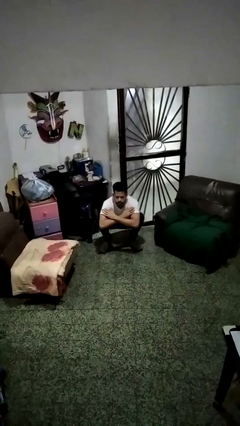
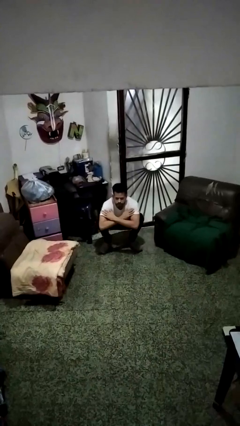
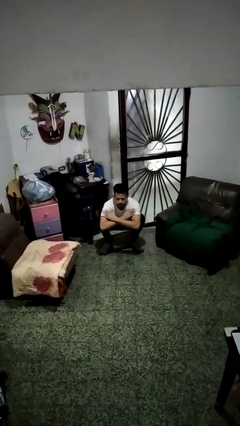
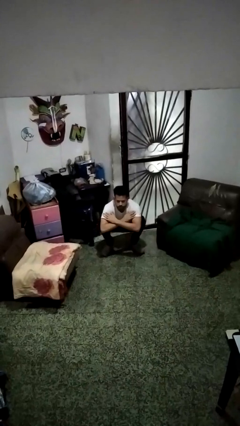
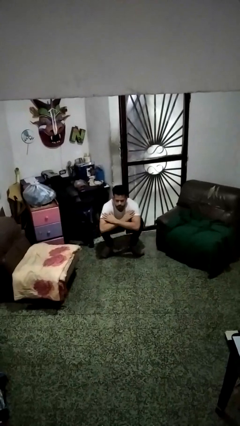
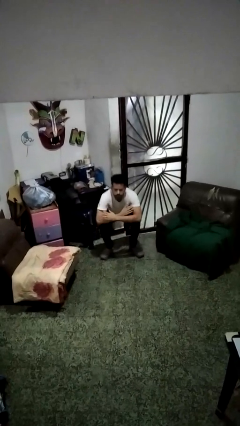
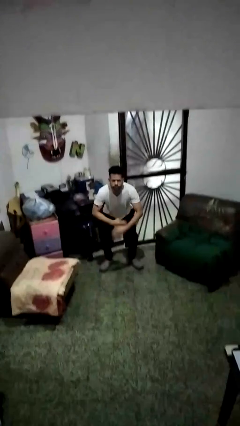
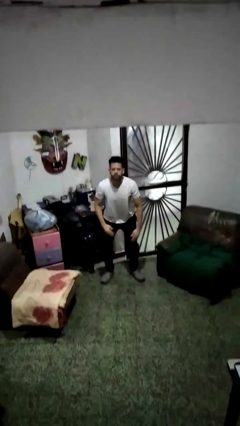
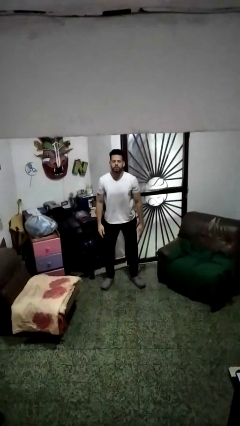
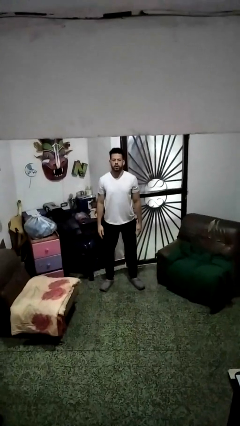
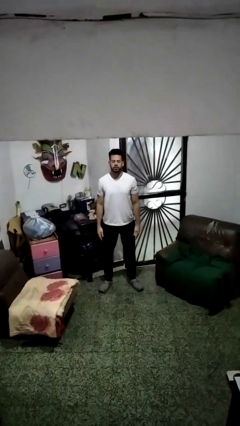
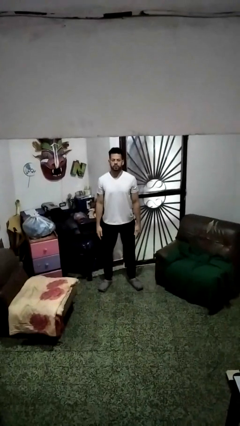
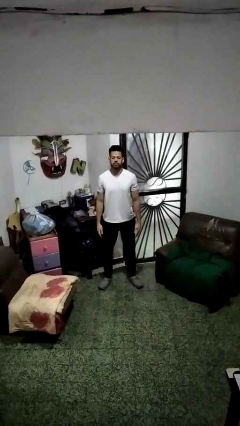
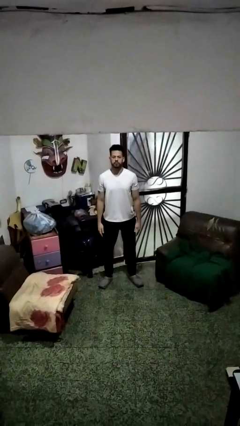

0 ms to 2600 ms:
person stands up

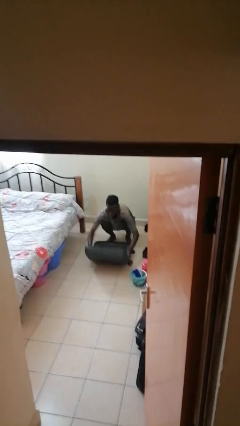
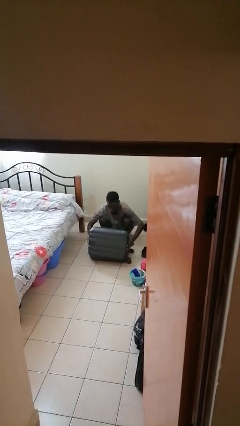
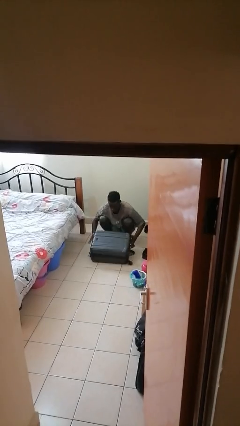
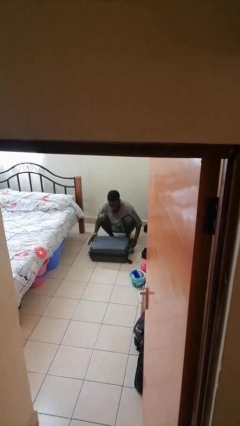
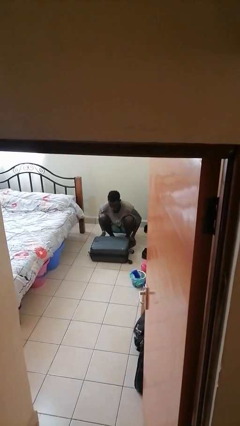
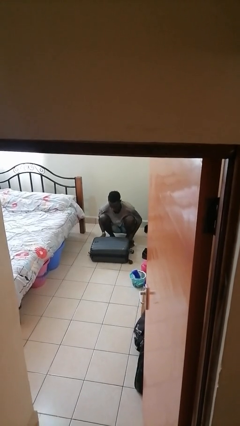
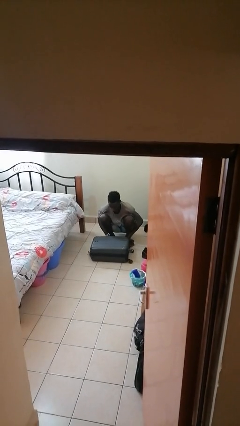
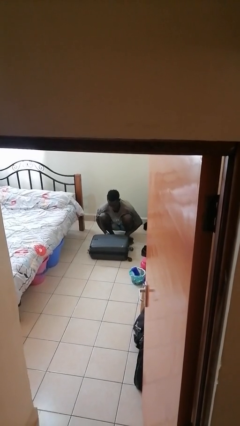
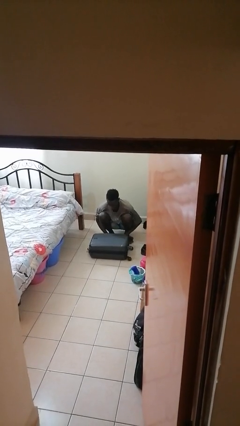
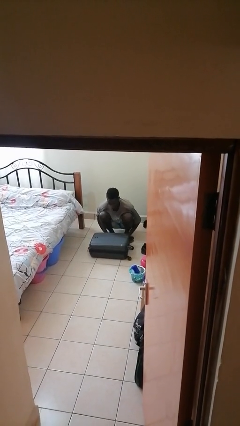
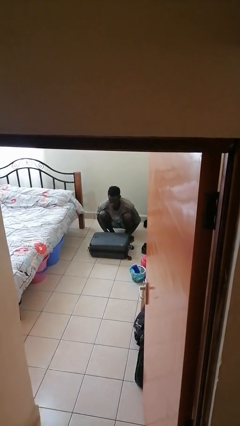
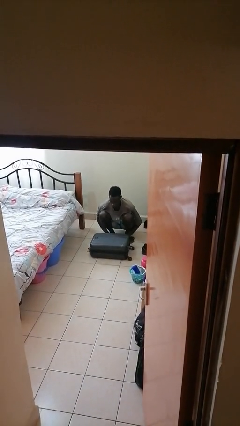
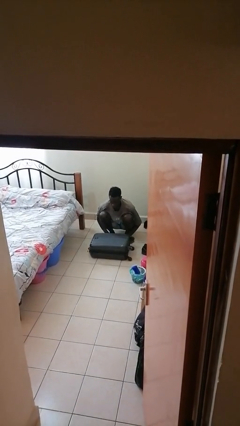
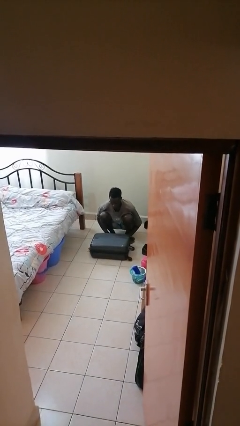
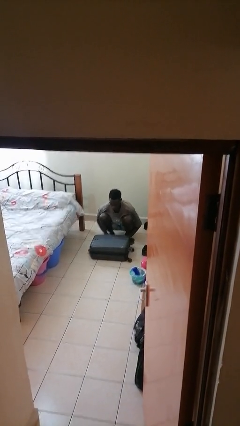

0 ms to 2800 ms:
person closes suitcase

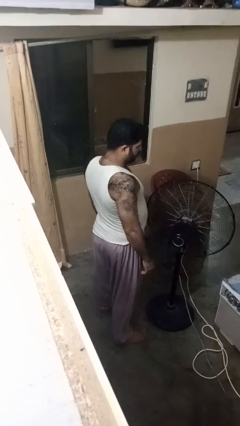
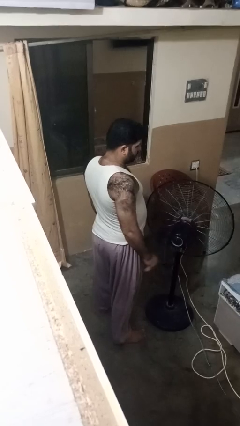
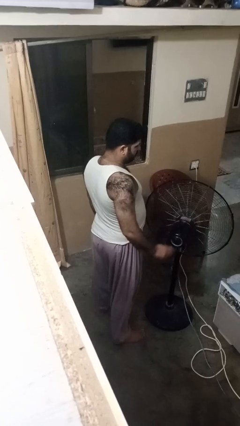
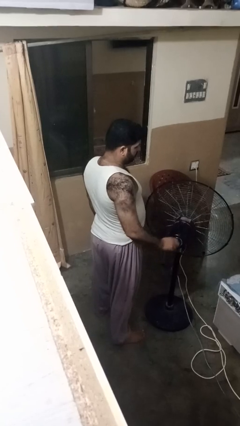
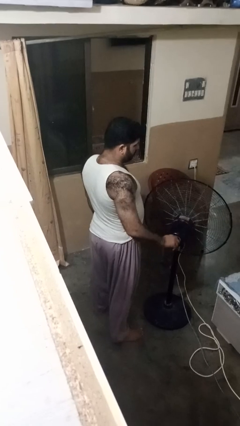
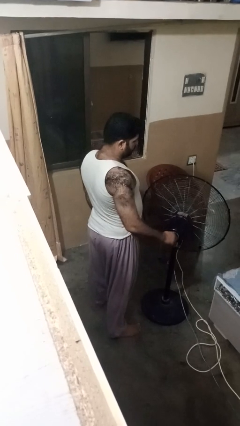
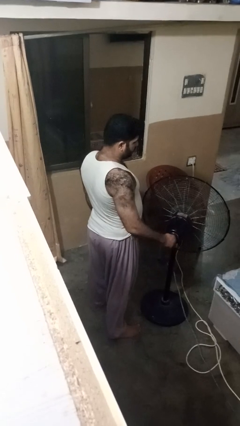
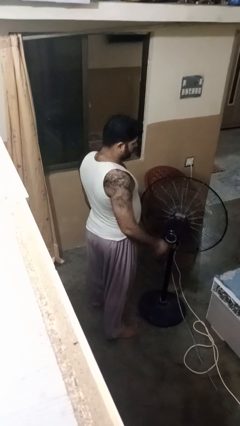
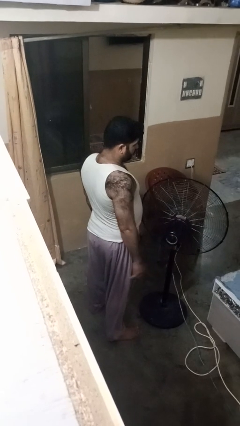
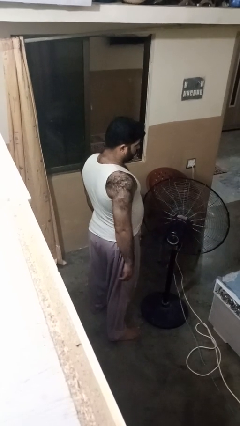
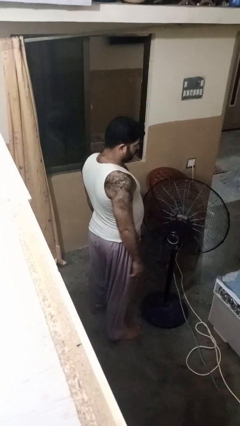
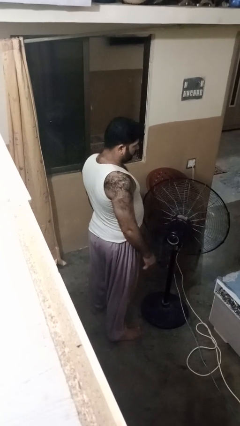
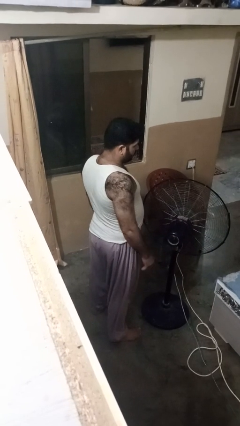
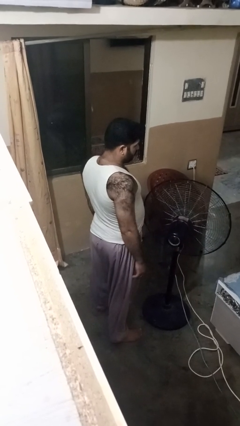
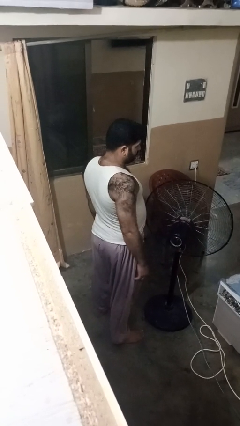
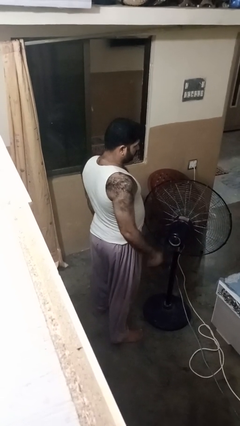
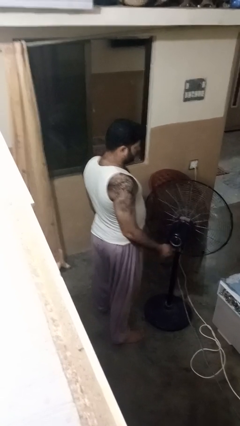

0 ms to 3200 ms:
person turns on fan

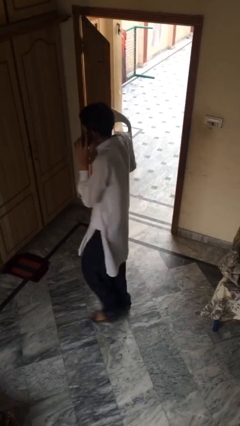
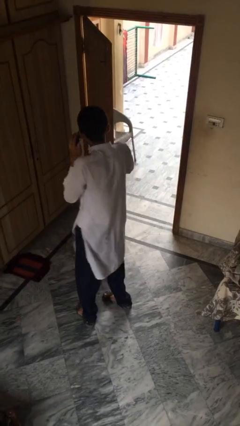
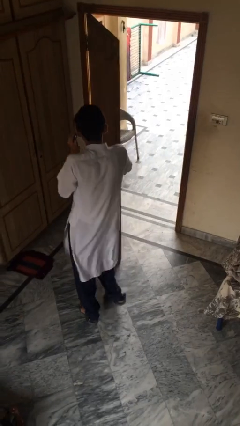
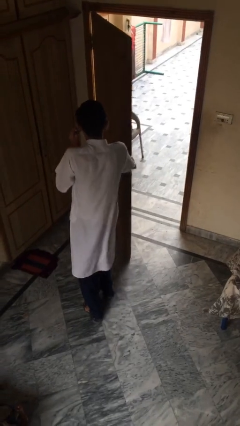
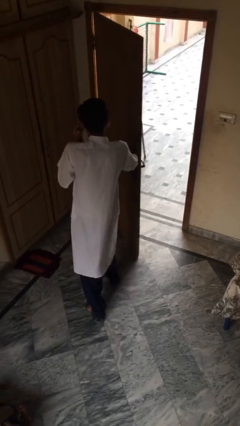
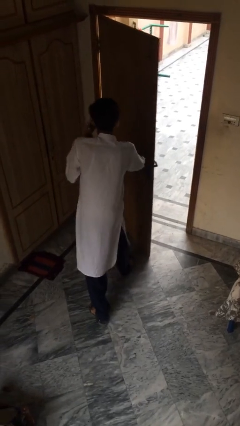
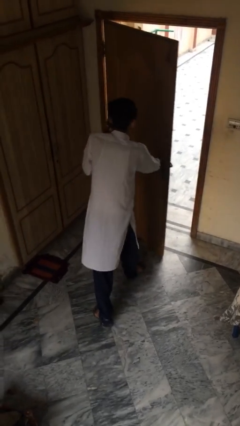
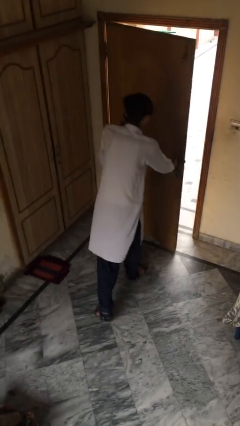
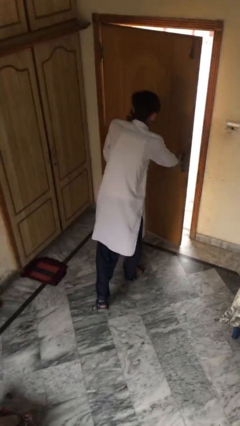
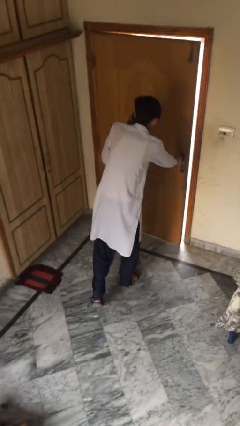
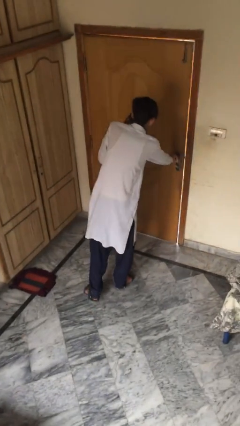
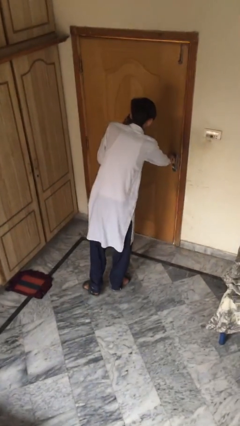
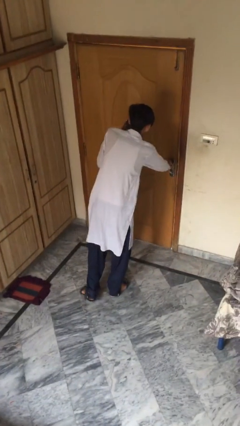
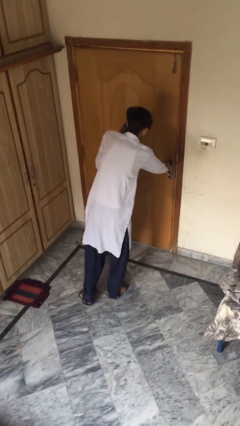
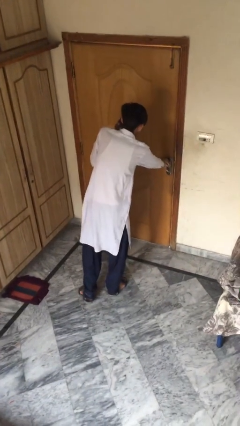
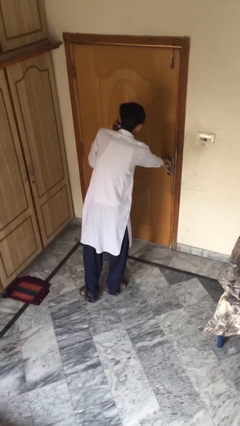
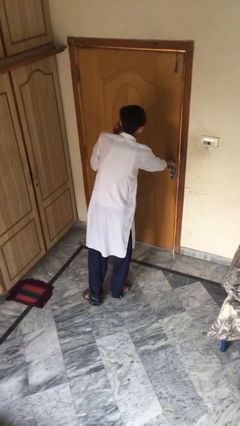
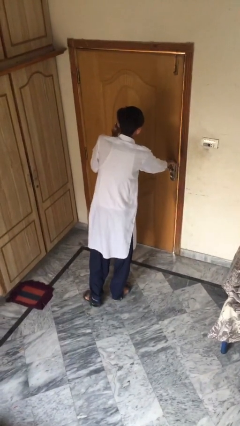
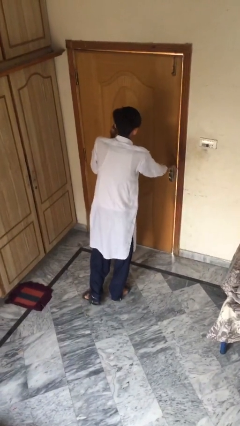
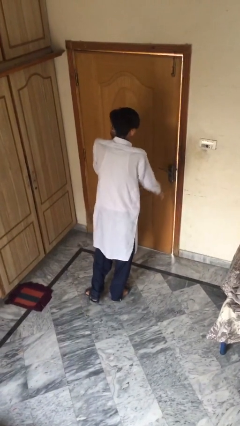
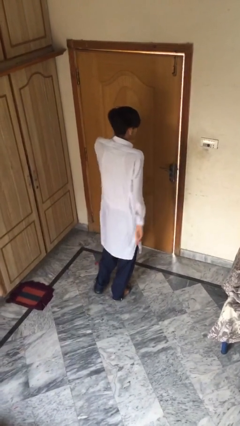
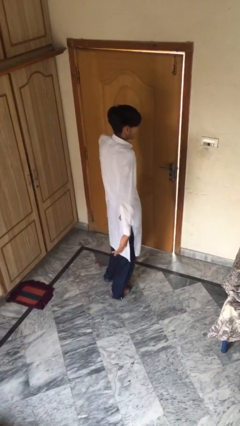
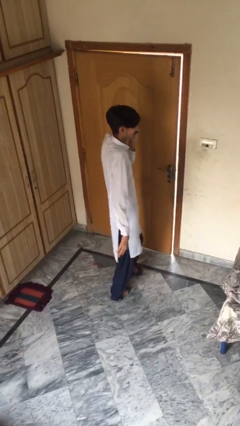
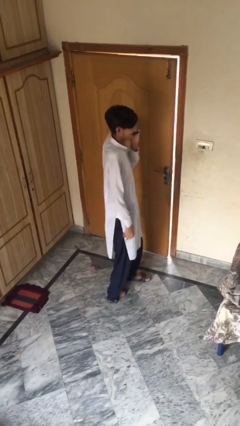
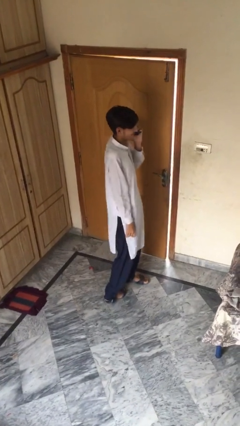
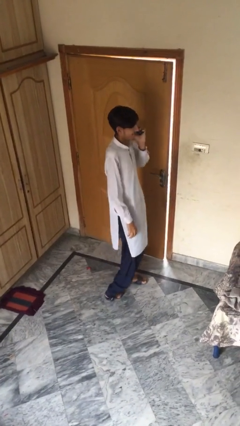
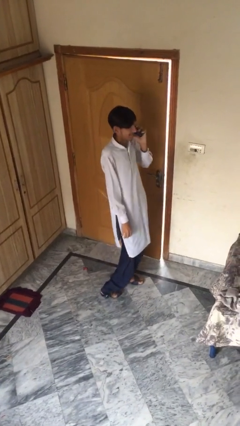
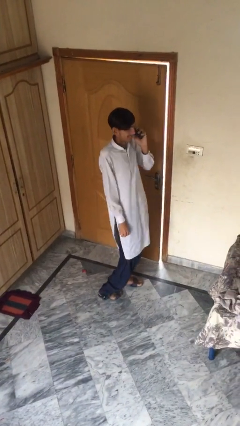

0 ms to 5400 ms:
person closes facility door

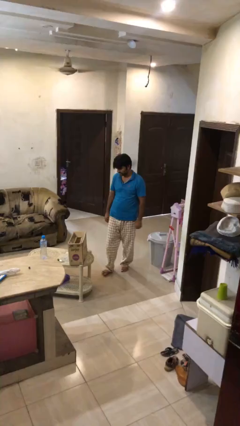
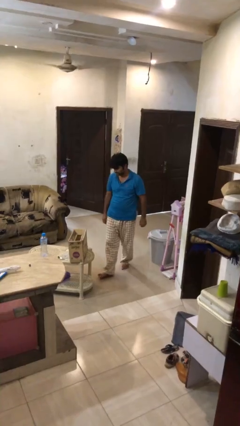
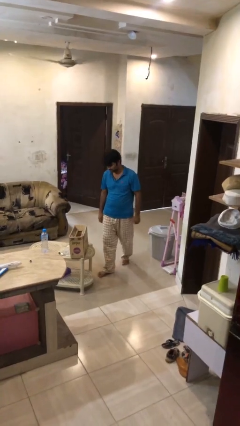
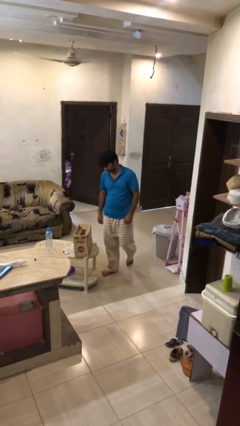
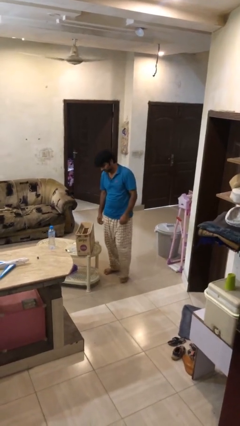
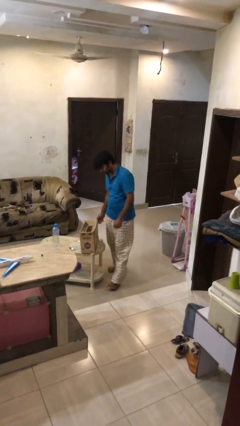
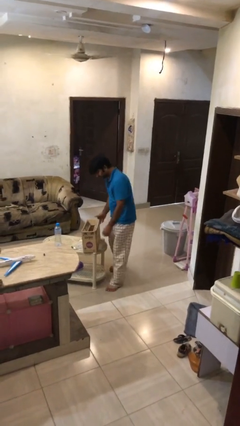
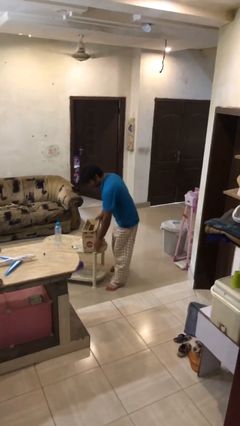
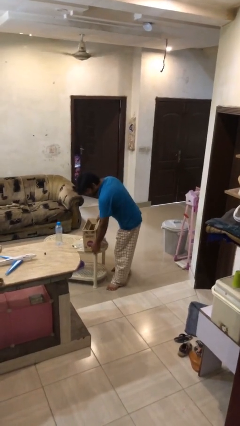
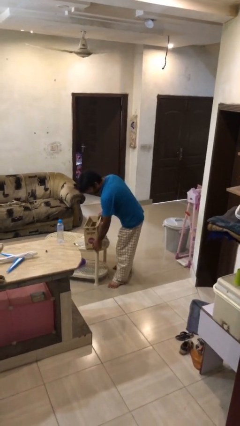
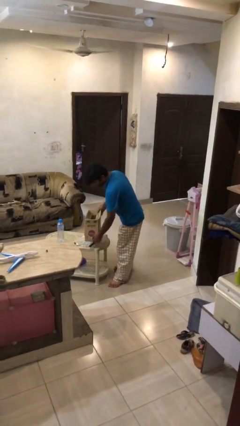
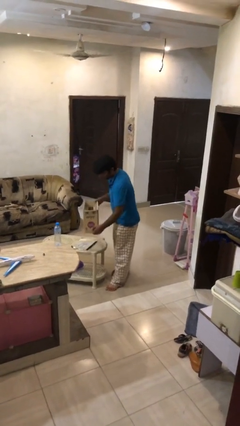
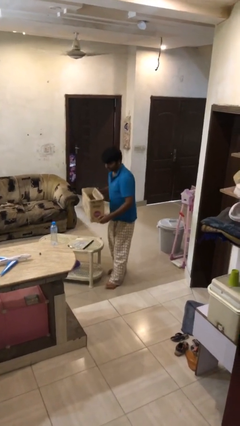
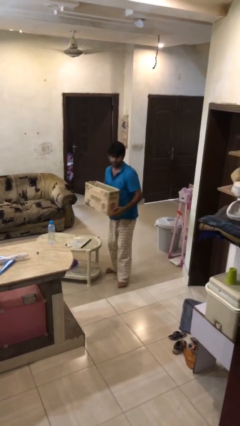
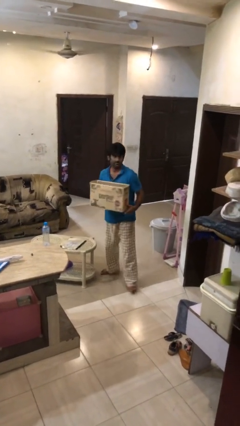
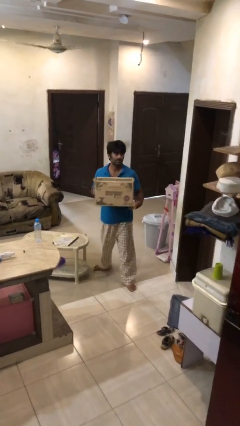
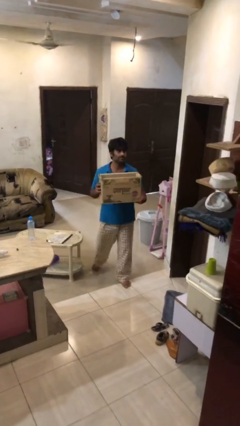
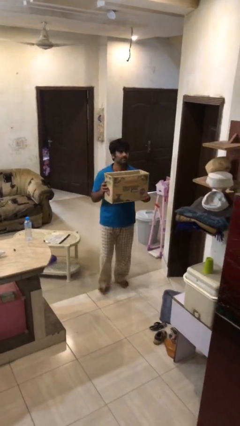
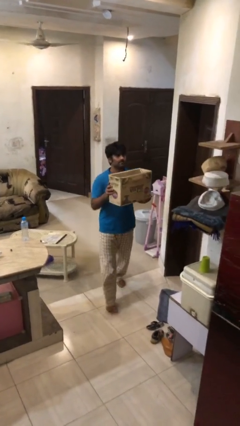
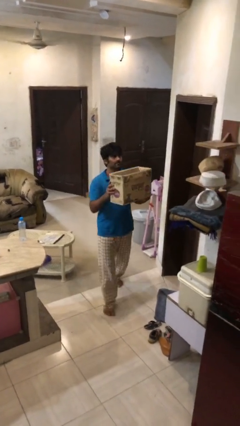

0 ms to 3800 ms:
person picks up object from table
